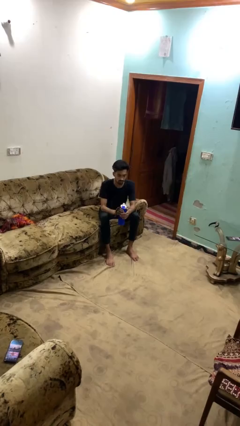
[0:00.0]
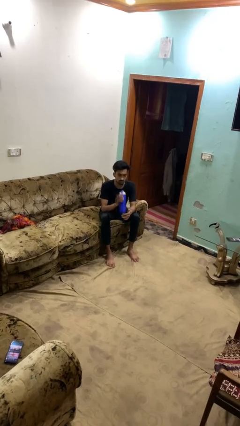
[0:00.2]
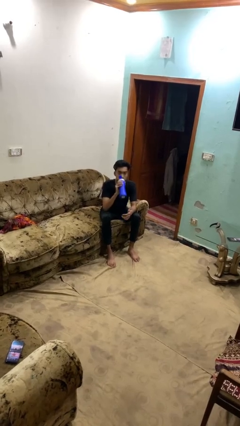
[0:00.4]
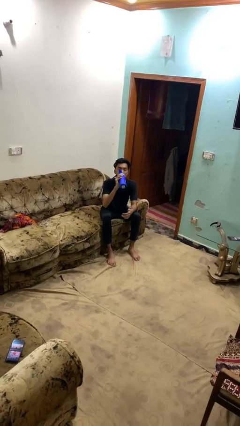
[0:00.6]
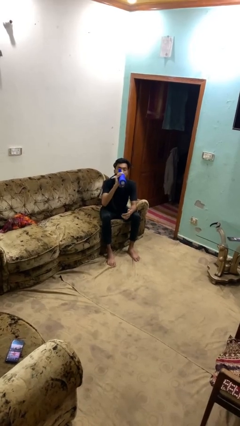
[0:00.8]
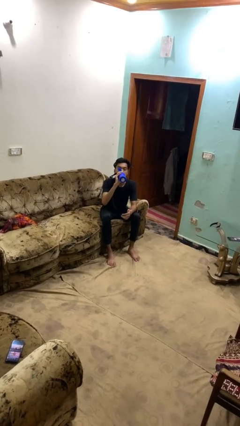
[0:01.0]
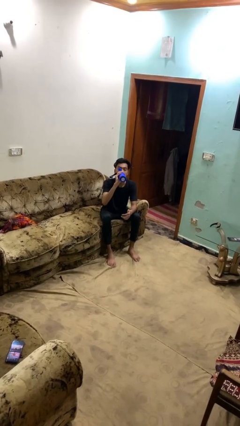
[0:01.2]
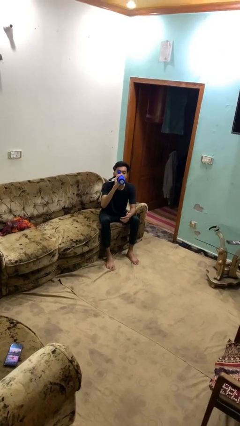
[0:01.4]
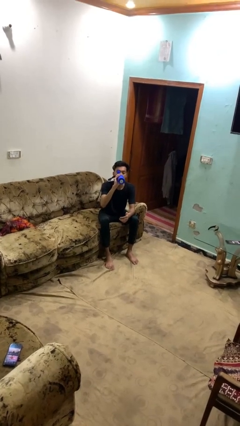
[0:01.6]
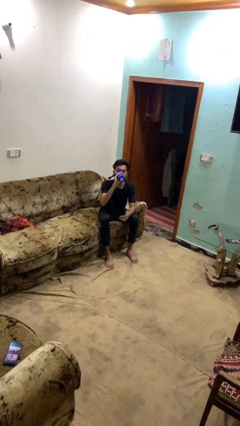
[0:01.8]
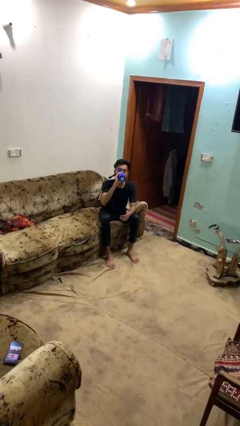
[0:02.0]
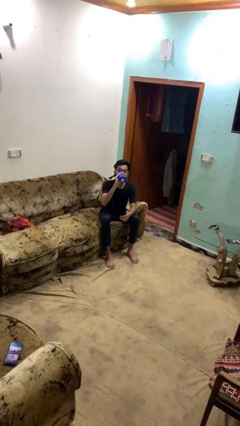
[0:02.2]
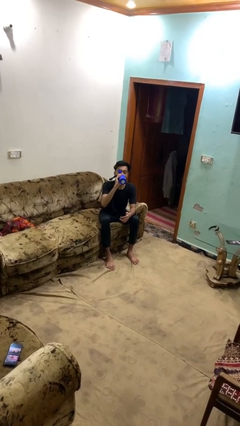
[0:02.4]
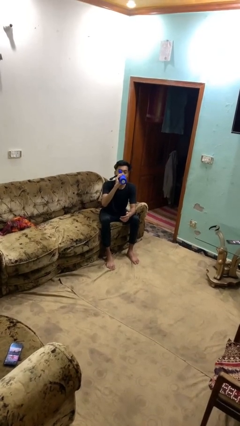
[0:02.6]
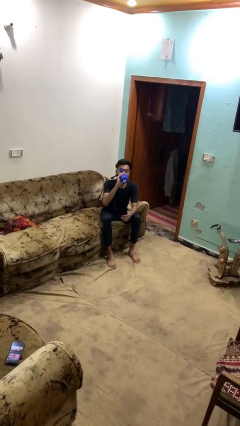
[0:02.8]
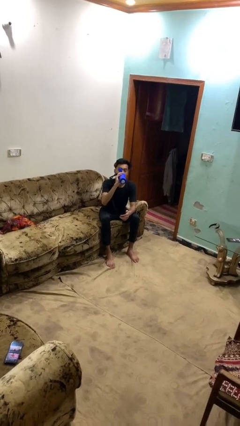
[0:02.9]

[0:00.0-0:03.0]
person drinks from bottle

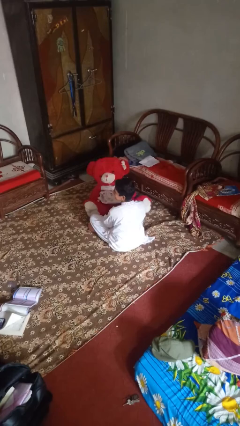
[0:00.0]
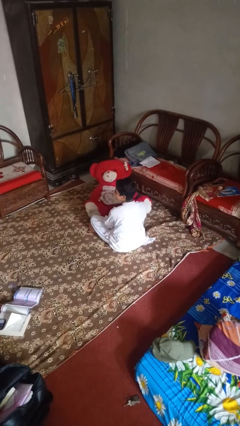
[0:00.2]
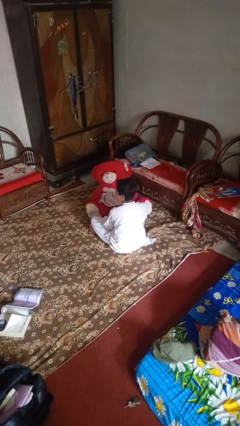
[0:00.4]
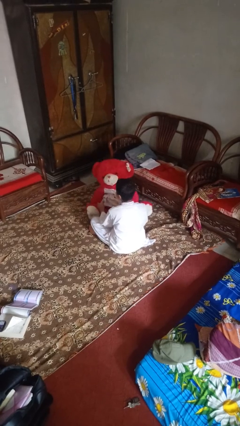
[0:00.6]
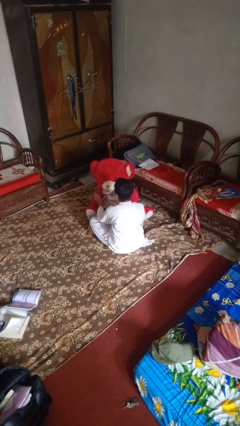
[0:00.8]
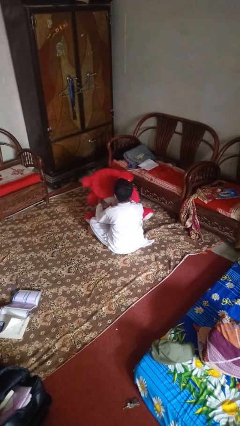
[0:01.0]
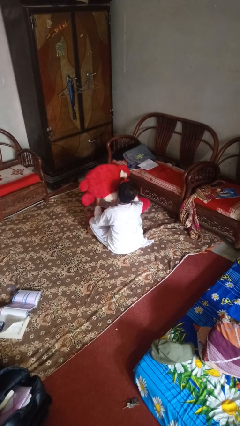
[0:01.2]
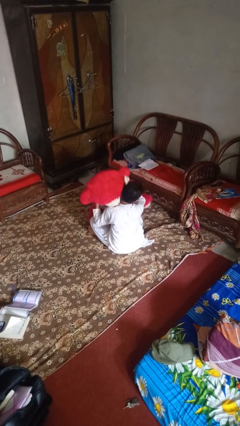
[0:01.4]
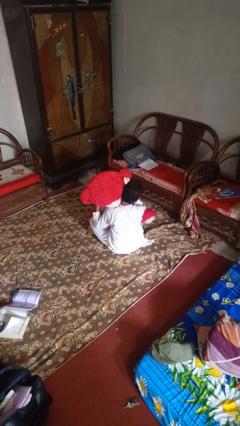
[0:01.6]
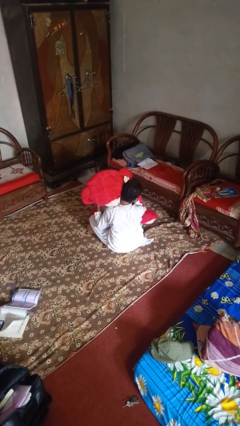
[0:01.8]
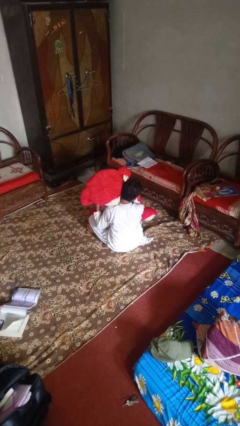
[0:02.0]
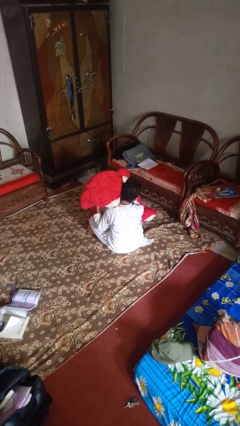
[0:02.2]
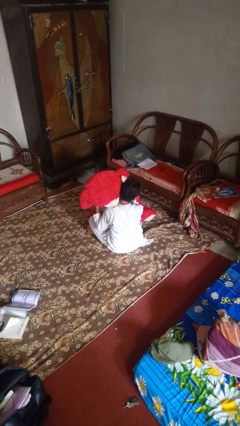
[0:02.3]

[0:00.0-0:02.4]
person hugs stuffed animal

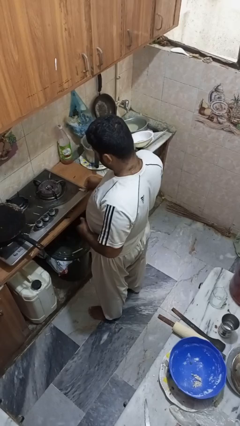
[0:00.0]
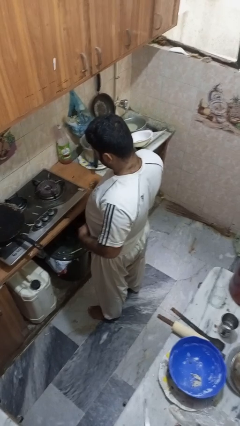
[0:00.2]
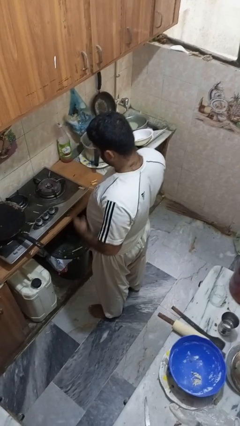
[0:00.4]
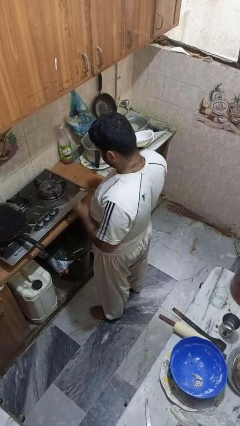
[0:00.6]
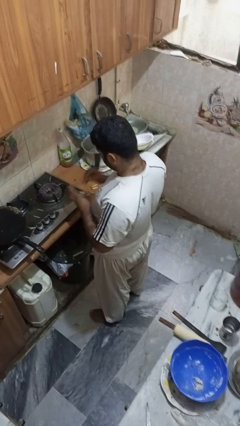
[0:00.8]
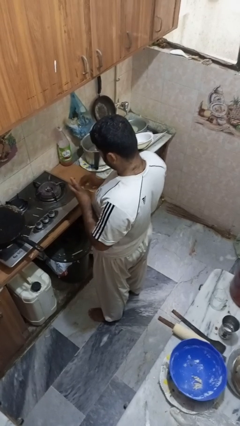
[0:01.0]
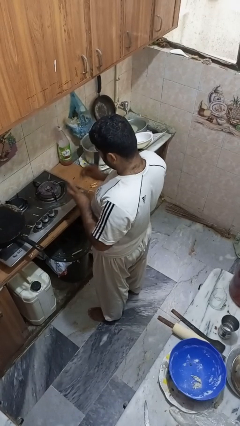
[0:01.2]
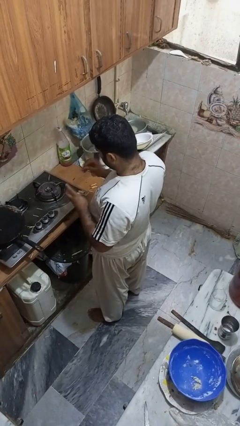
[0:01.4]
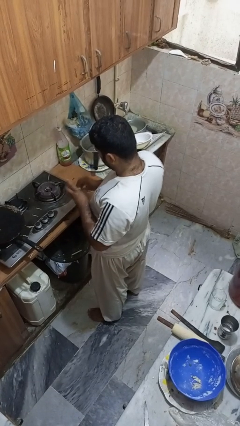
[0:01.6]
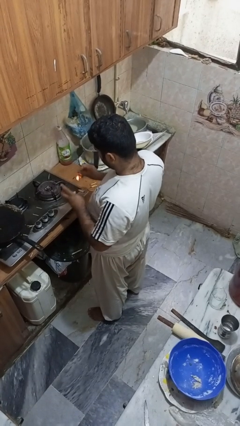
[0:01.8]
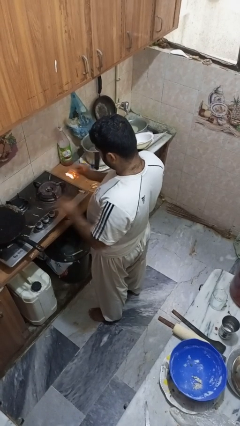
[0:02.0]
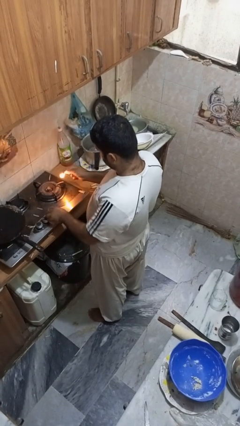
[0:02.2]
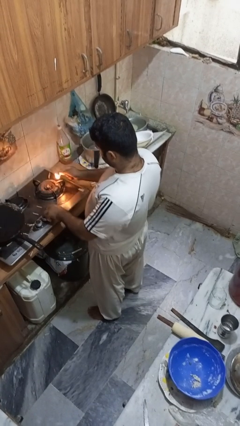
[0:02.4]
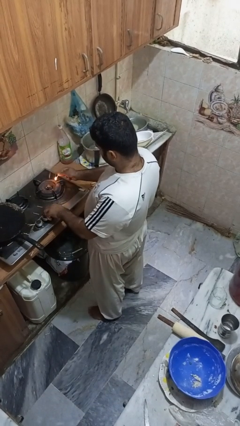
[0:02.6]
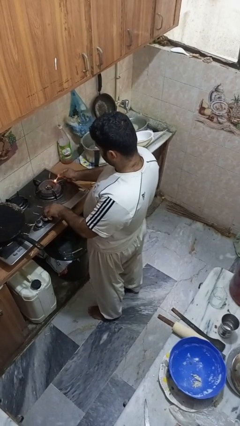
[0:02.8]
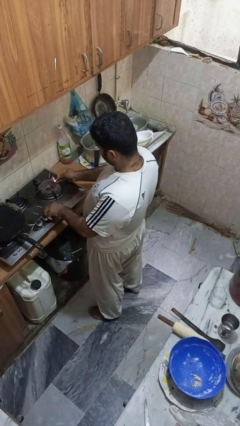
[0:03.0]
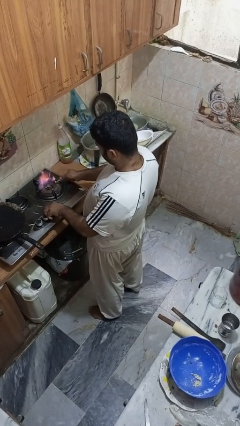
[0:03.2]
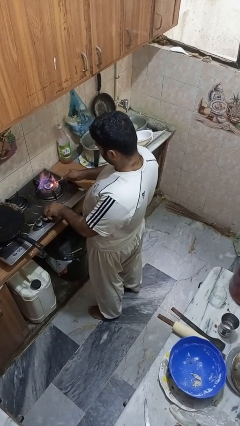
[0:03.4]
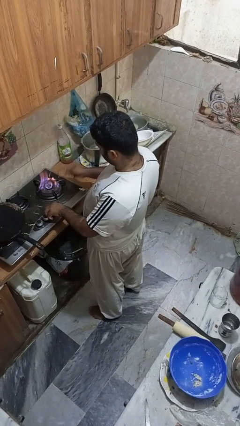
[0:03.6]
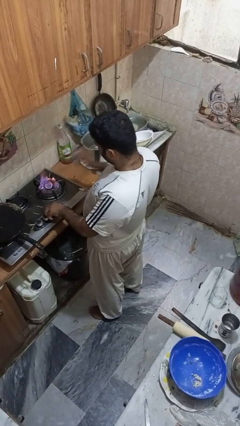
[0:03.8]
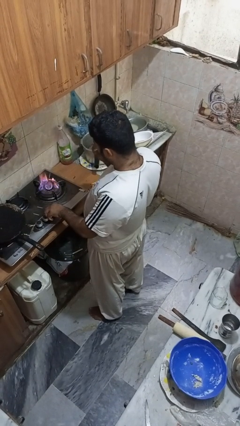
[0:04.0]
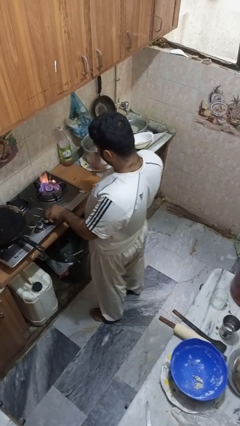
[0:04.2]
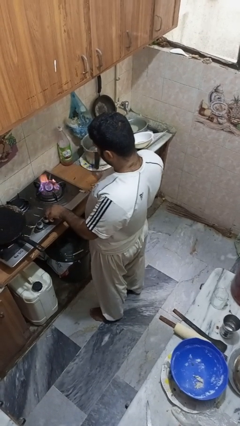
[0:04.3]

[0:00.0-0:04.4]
person turns on stovetop

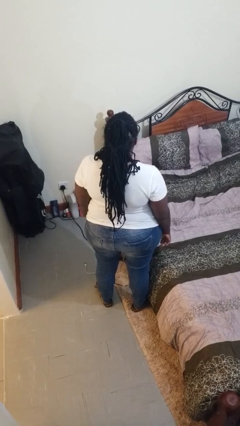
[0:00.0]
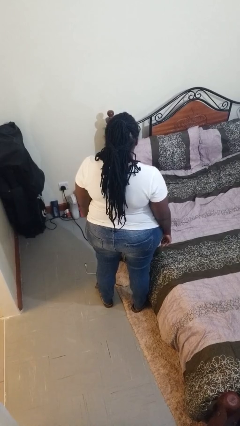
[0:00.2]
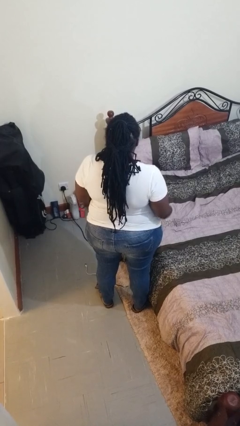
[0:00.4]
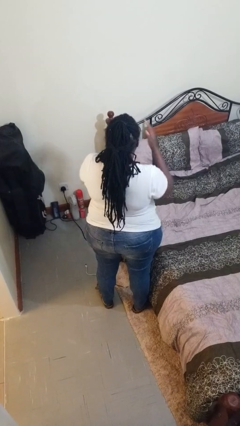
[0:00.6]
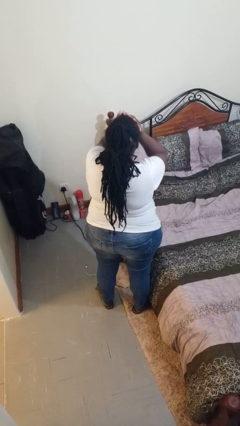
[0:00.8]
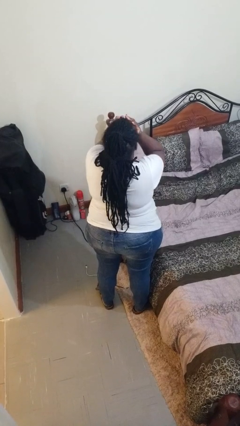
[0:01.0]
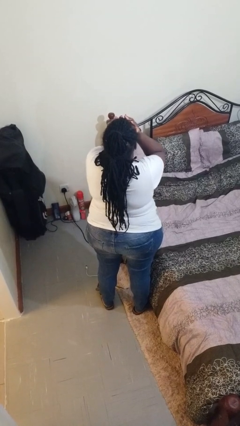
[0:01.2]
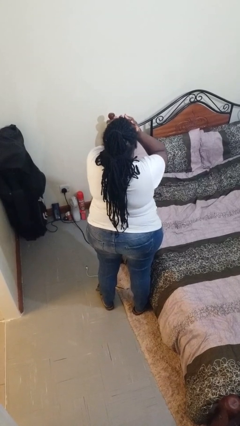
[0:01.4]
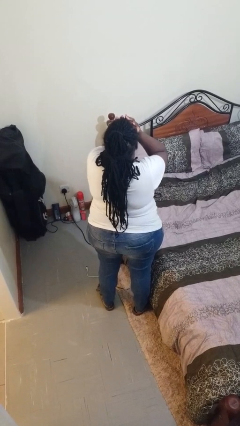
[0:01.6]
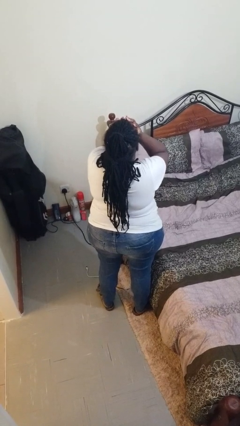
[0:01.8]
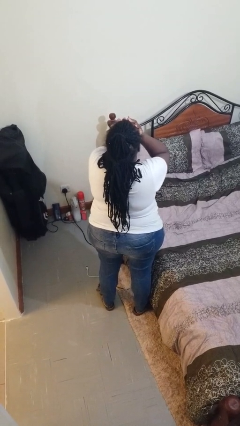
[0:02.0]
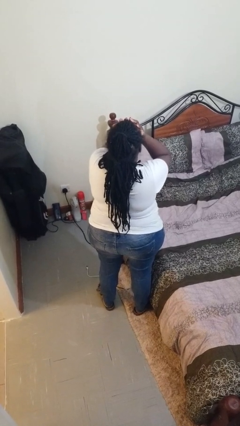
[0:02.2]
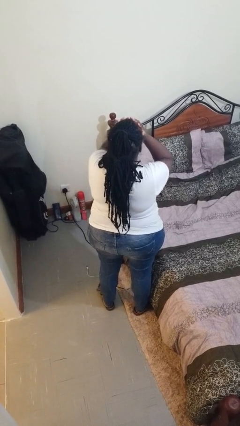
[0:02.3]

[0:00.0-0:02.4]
person covers face with hands

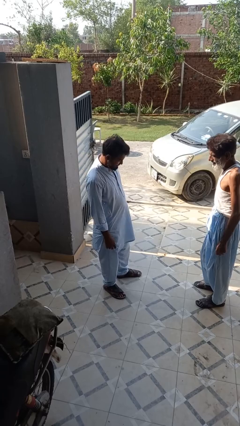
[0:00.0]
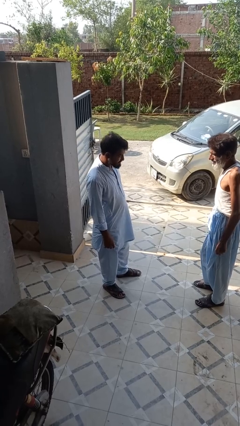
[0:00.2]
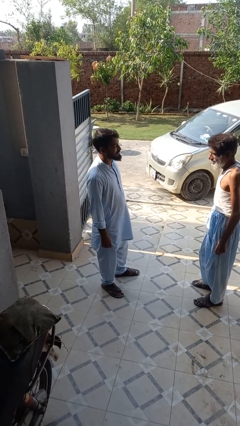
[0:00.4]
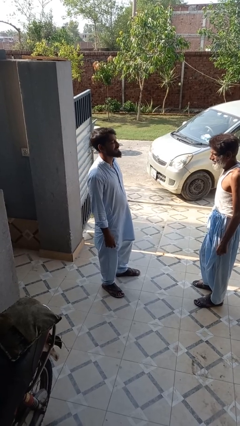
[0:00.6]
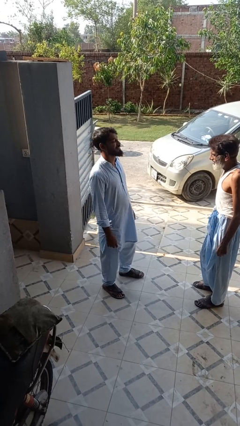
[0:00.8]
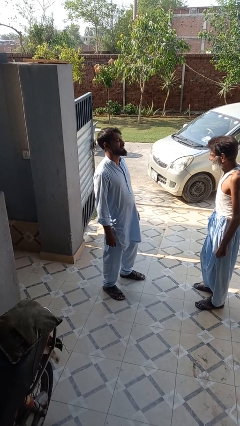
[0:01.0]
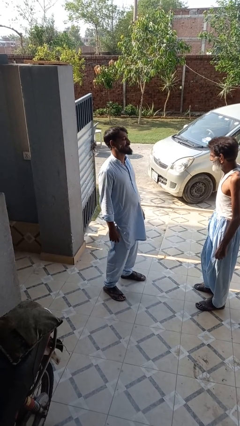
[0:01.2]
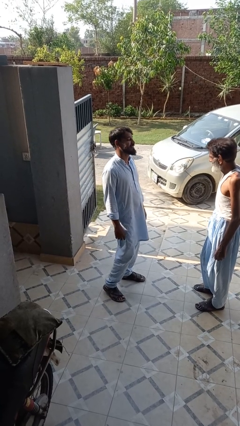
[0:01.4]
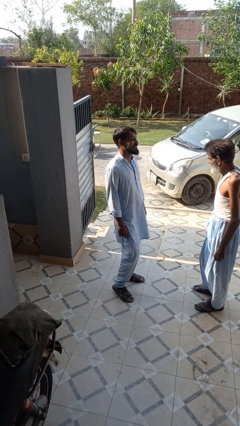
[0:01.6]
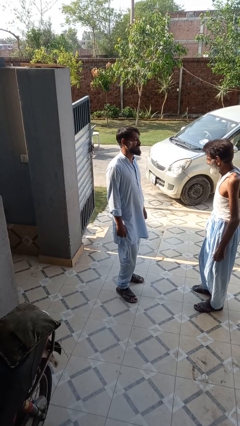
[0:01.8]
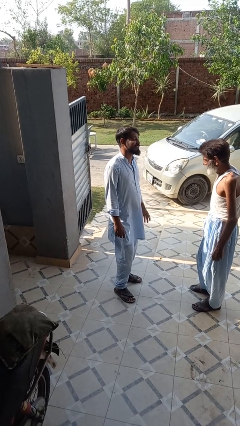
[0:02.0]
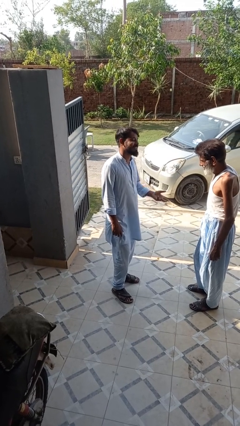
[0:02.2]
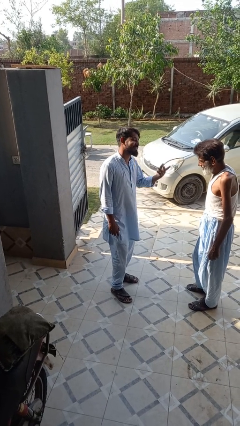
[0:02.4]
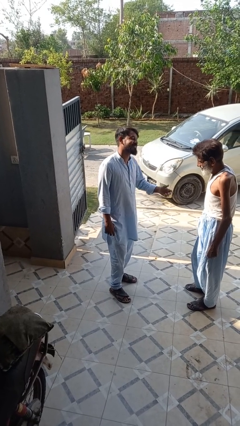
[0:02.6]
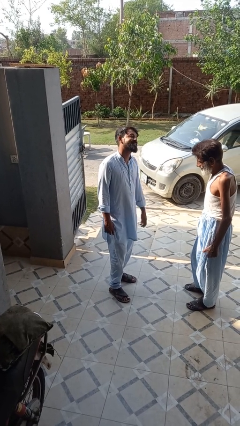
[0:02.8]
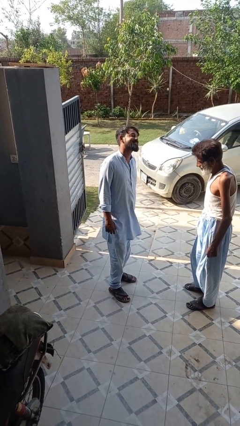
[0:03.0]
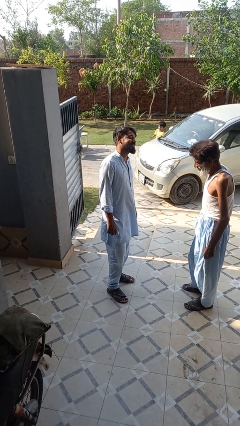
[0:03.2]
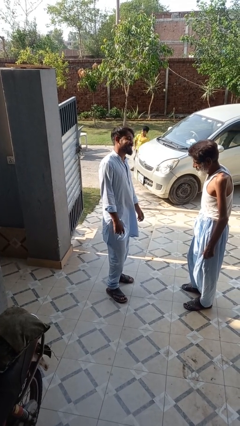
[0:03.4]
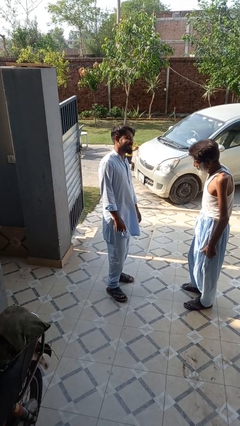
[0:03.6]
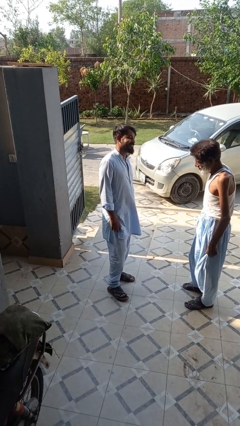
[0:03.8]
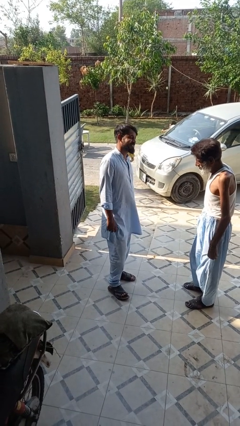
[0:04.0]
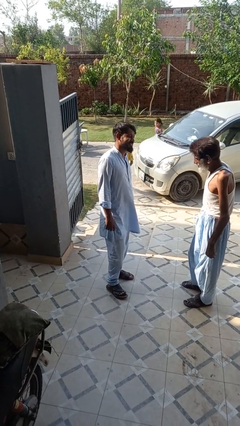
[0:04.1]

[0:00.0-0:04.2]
person laughs with person

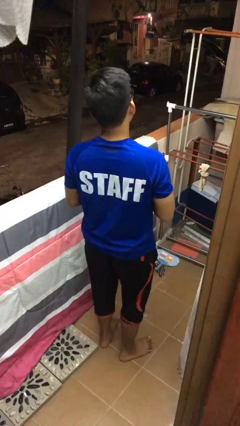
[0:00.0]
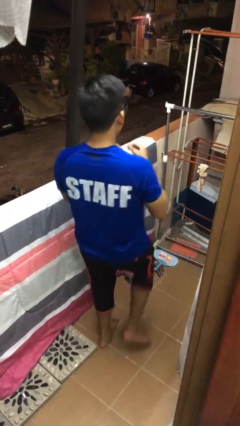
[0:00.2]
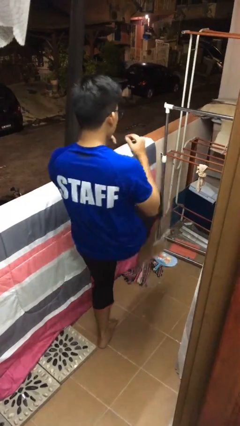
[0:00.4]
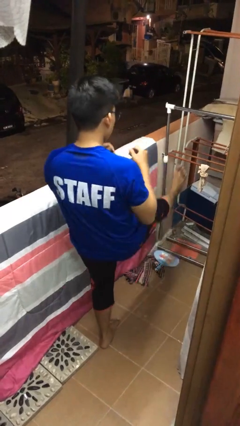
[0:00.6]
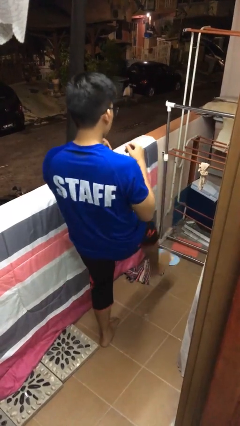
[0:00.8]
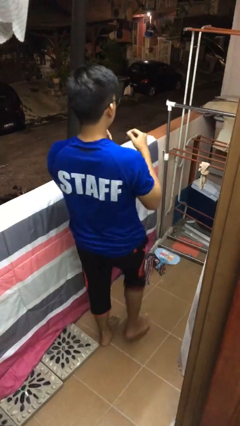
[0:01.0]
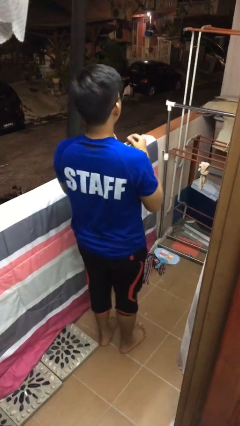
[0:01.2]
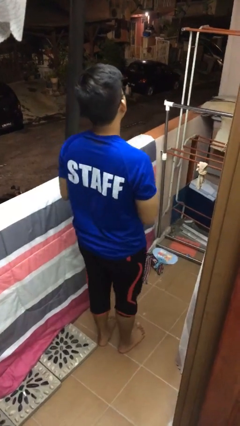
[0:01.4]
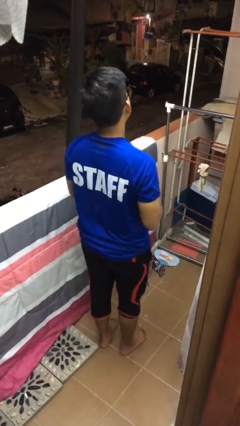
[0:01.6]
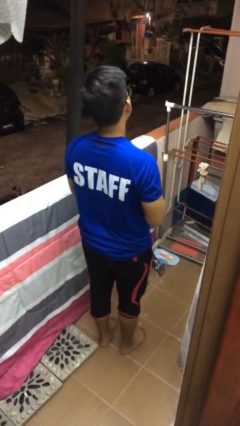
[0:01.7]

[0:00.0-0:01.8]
person karate kicks
